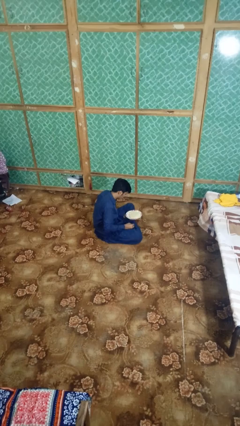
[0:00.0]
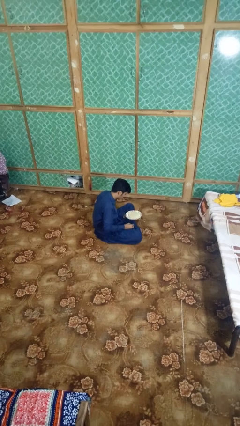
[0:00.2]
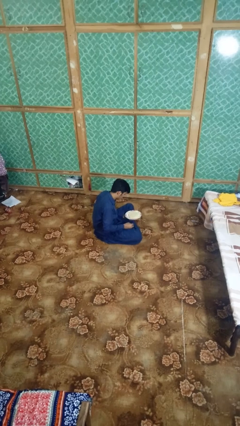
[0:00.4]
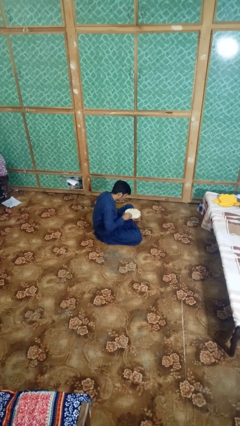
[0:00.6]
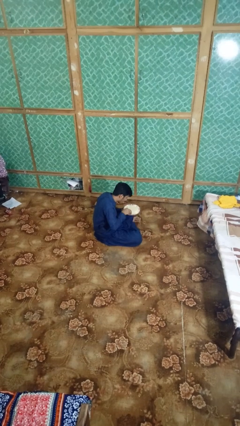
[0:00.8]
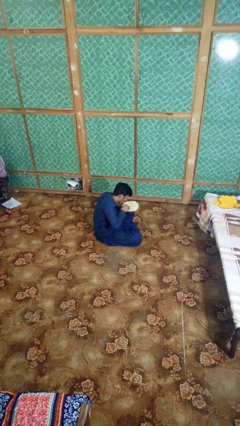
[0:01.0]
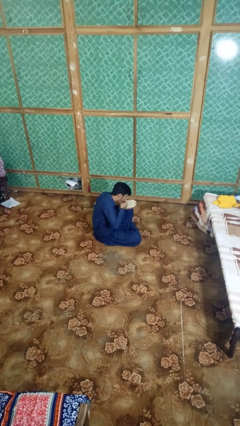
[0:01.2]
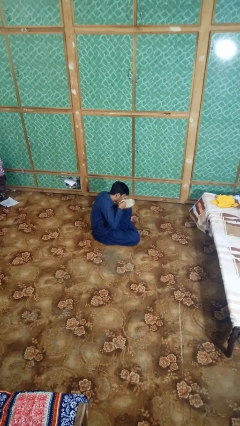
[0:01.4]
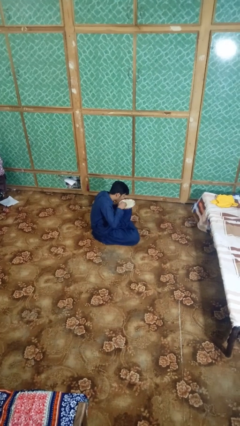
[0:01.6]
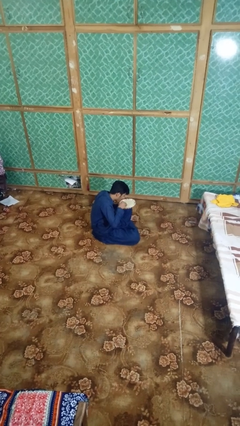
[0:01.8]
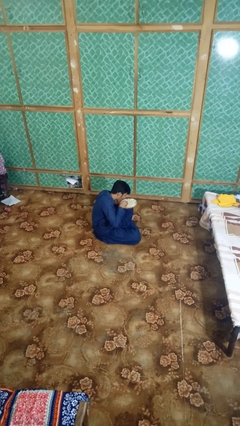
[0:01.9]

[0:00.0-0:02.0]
person eats with hands

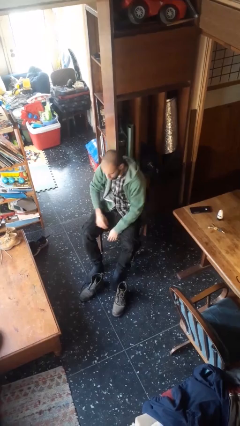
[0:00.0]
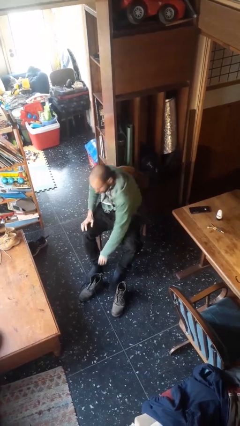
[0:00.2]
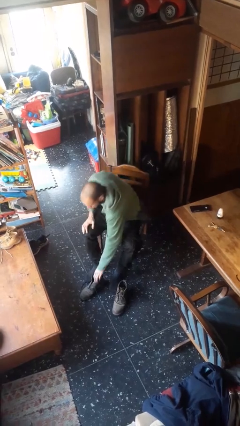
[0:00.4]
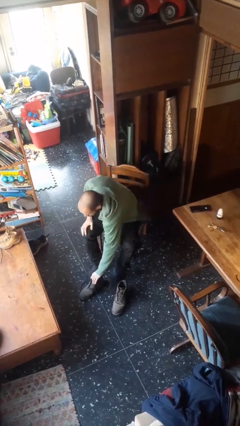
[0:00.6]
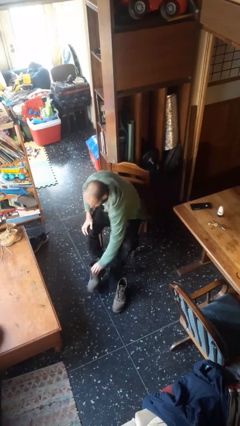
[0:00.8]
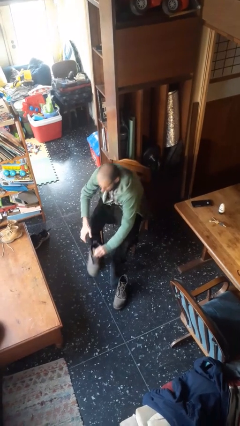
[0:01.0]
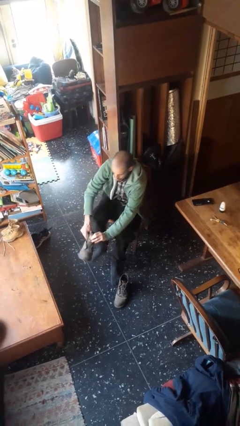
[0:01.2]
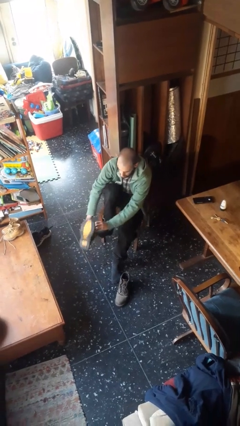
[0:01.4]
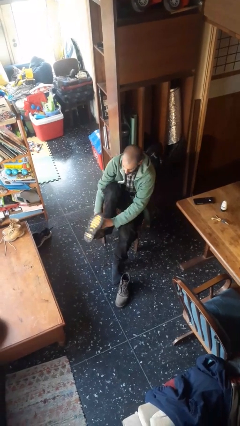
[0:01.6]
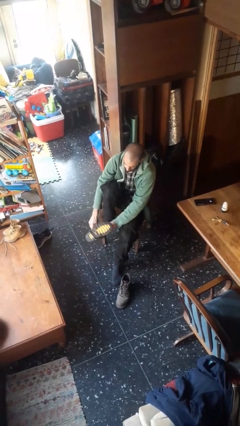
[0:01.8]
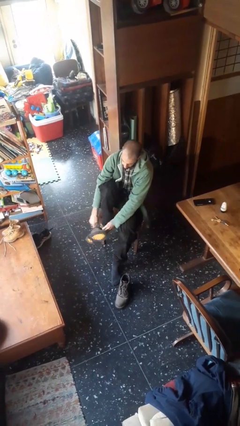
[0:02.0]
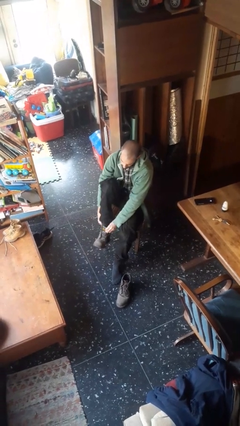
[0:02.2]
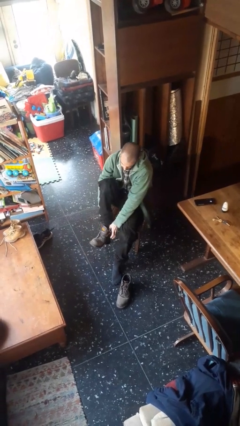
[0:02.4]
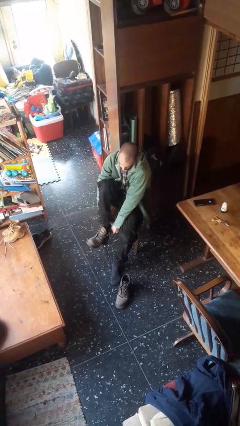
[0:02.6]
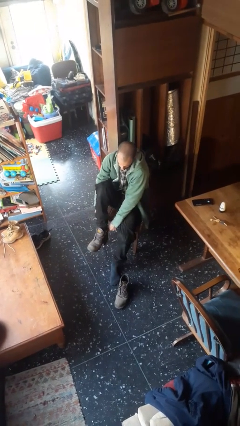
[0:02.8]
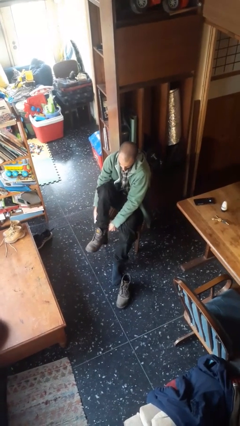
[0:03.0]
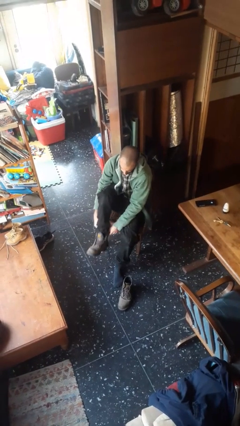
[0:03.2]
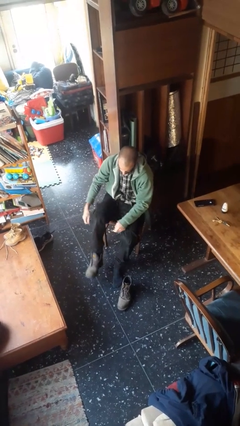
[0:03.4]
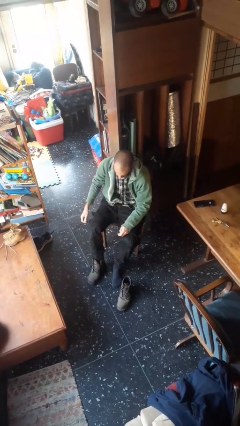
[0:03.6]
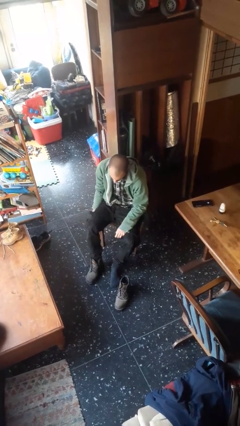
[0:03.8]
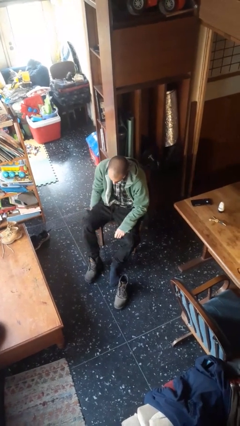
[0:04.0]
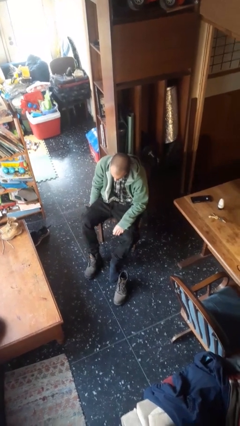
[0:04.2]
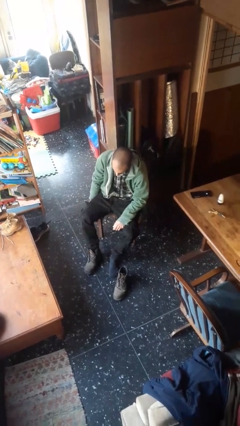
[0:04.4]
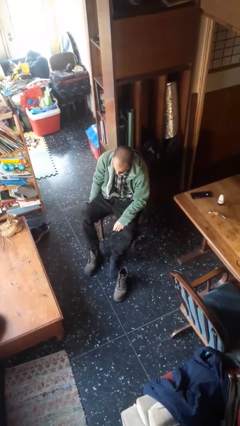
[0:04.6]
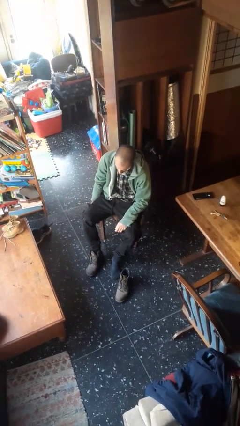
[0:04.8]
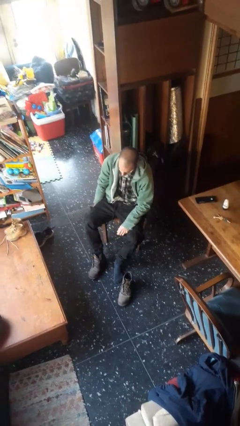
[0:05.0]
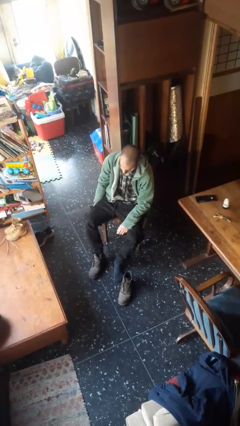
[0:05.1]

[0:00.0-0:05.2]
person puts on boots

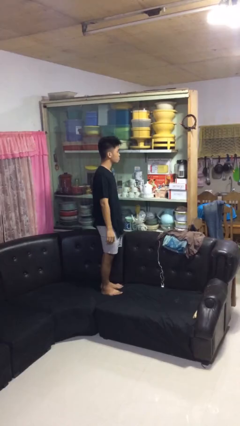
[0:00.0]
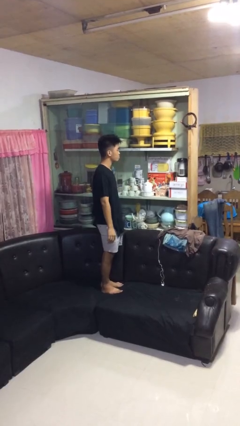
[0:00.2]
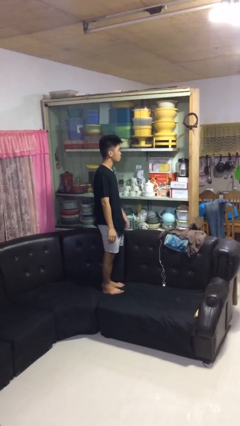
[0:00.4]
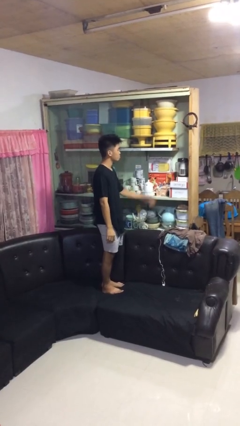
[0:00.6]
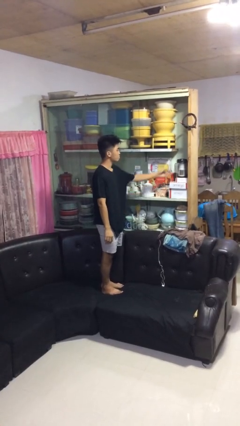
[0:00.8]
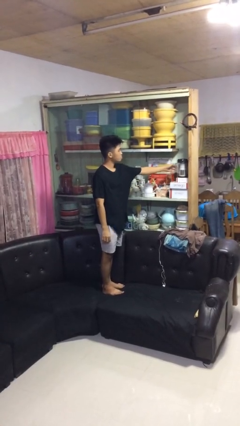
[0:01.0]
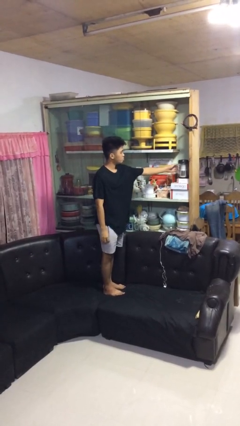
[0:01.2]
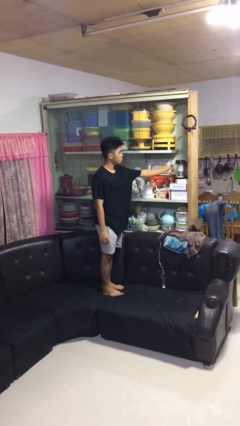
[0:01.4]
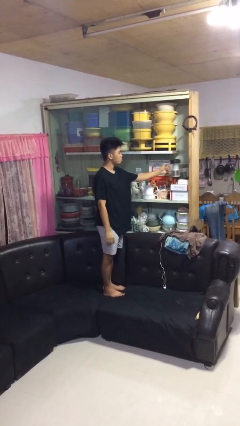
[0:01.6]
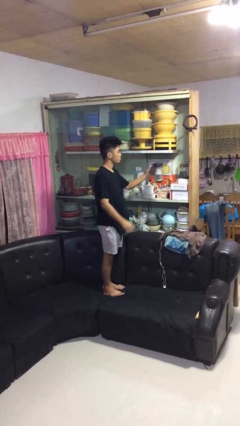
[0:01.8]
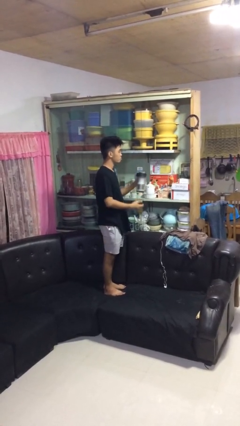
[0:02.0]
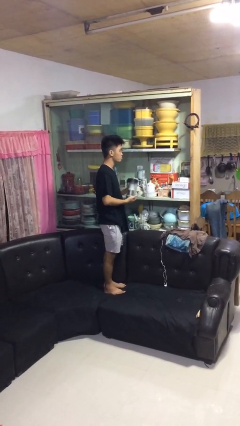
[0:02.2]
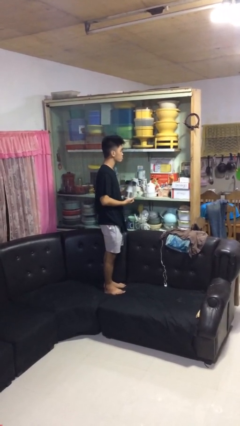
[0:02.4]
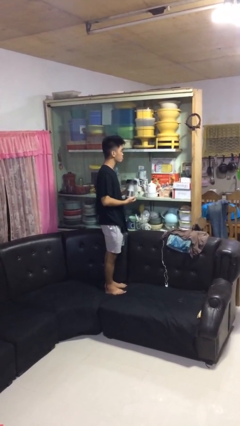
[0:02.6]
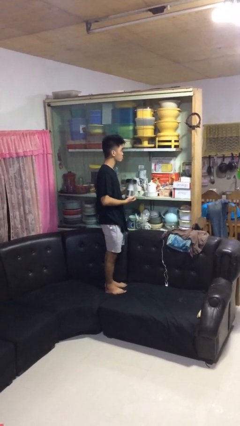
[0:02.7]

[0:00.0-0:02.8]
person picks up object from cabinet

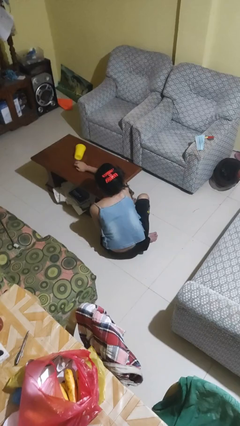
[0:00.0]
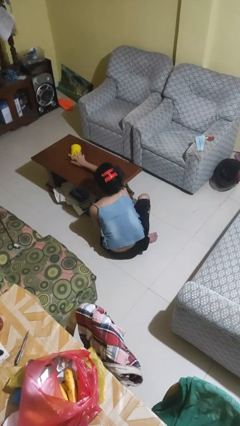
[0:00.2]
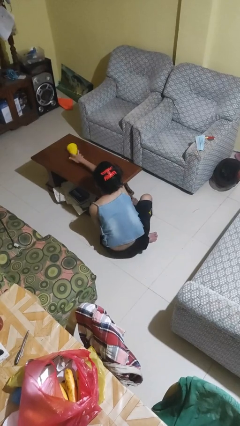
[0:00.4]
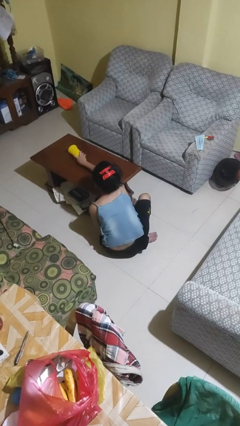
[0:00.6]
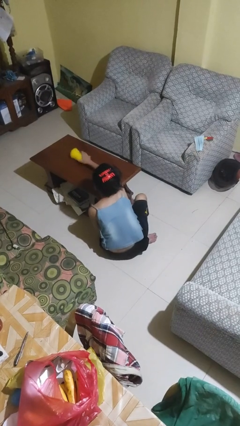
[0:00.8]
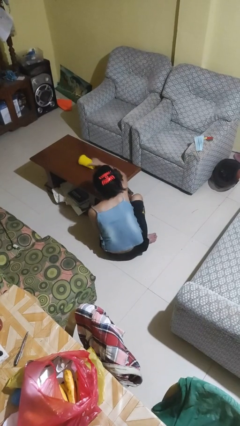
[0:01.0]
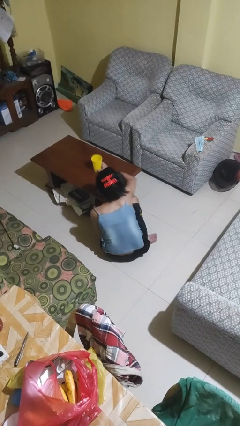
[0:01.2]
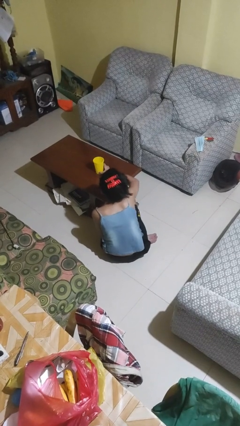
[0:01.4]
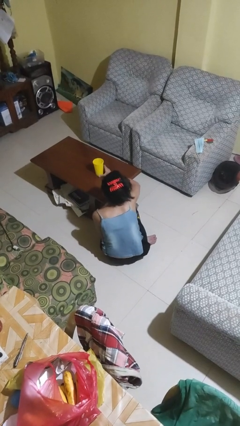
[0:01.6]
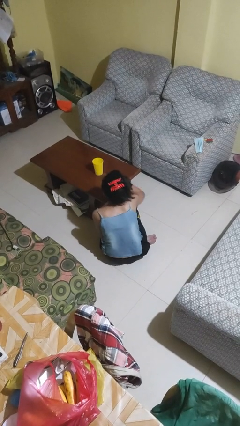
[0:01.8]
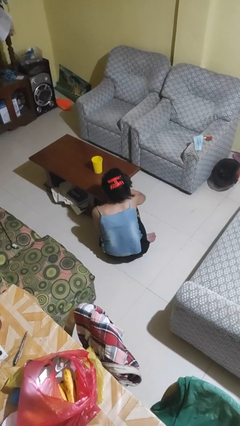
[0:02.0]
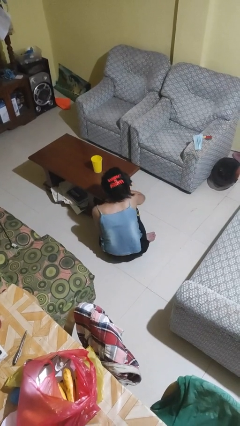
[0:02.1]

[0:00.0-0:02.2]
person sets upright glass

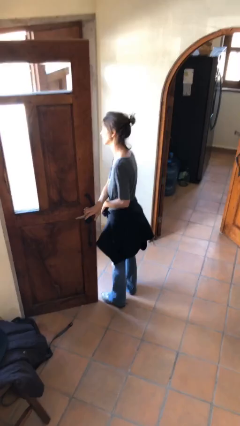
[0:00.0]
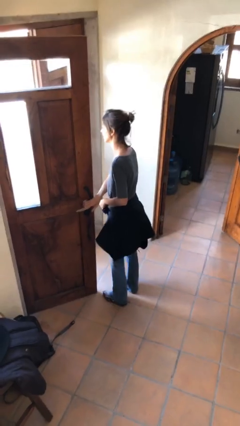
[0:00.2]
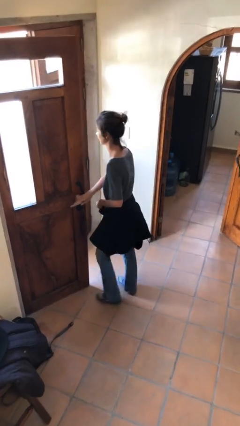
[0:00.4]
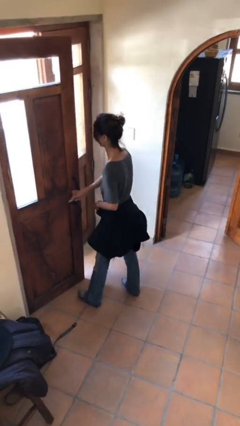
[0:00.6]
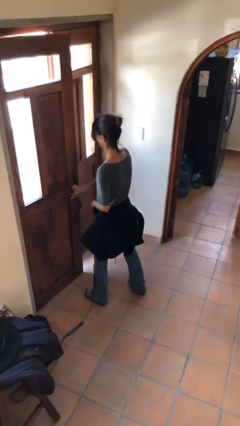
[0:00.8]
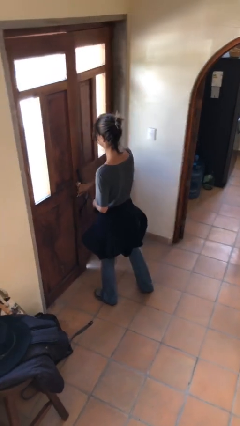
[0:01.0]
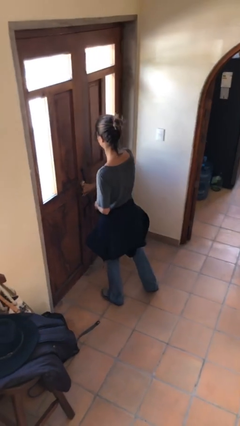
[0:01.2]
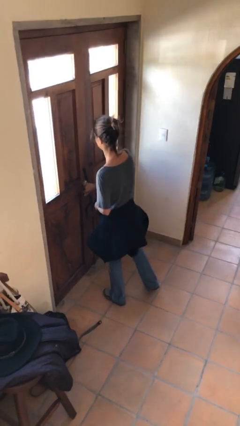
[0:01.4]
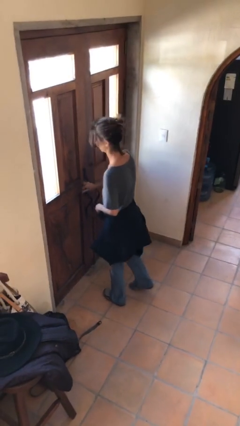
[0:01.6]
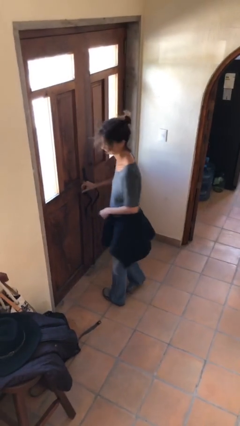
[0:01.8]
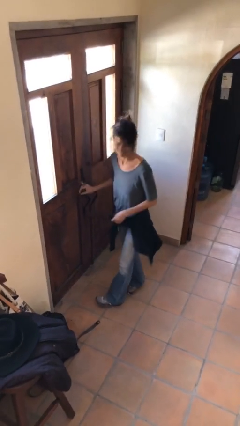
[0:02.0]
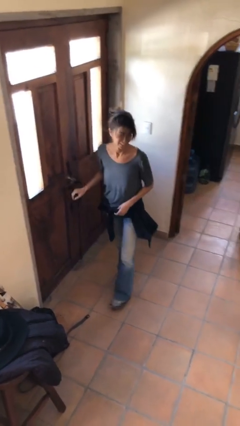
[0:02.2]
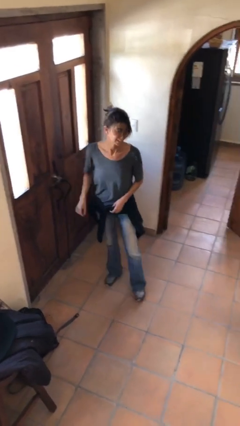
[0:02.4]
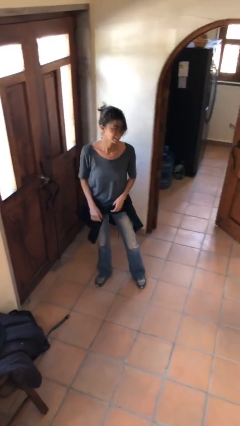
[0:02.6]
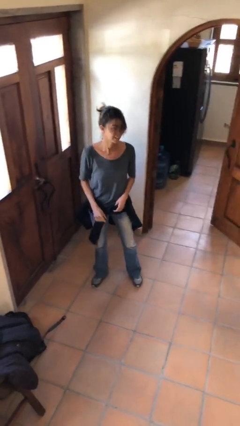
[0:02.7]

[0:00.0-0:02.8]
person closes facility door

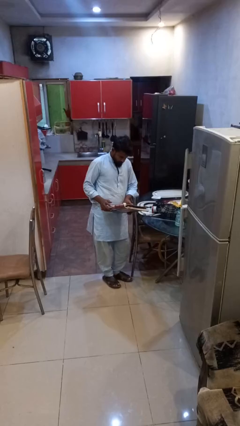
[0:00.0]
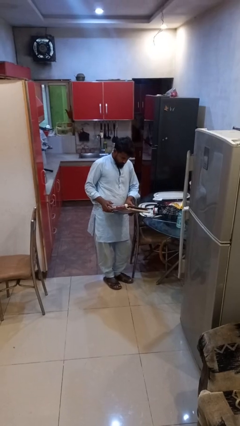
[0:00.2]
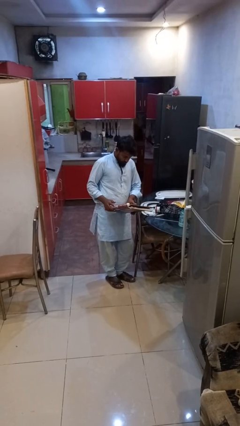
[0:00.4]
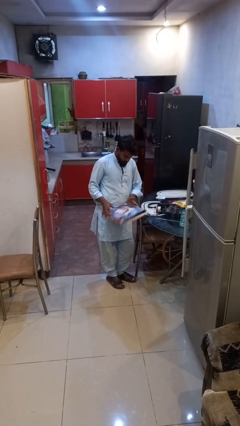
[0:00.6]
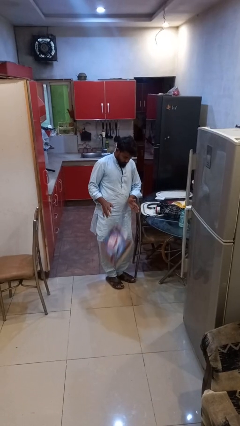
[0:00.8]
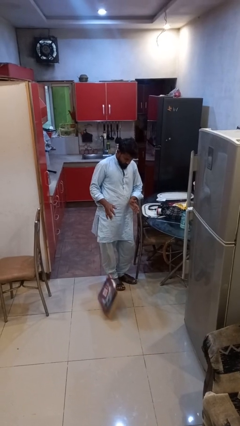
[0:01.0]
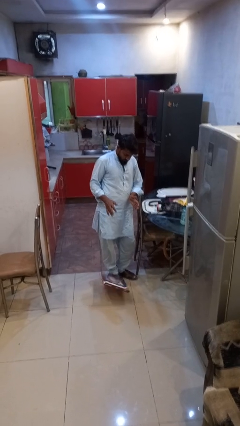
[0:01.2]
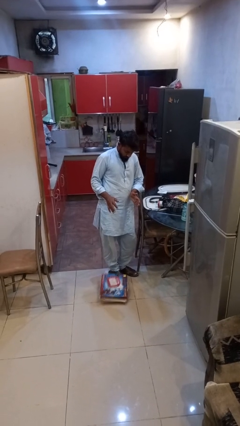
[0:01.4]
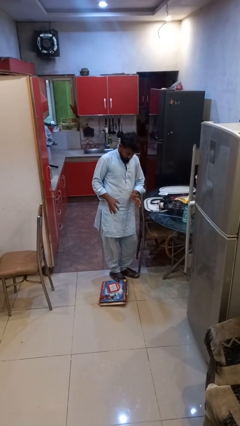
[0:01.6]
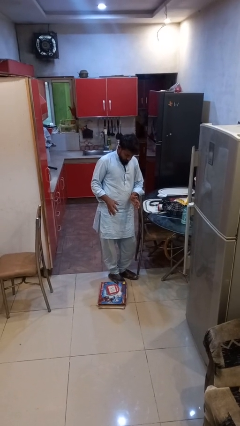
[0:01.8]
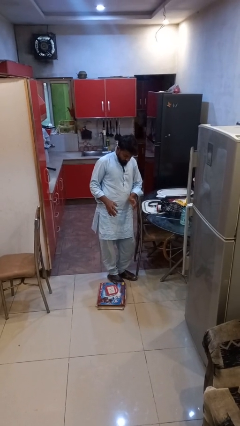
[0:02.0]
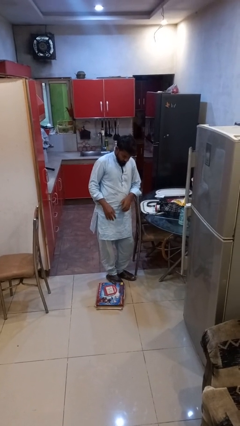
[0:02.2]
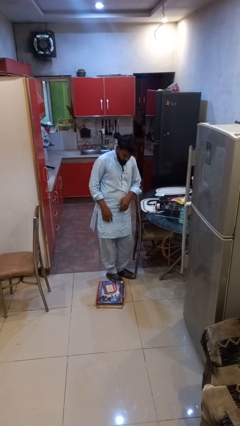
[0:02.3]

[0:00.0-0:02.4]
person drops object
